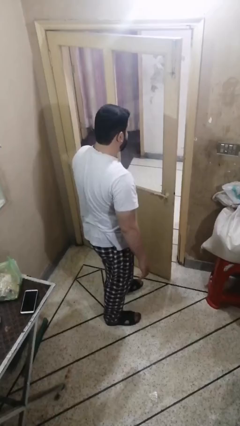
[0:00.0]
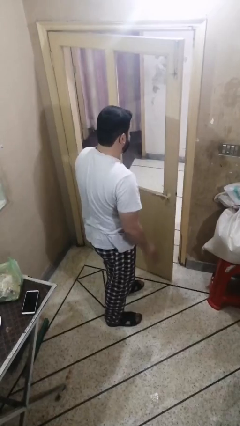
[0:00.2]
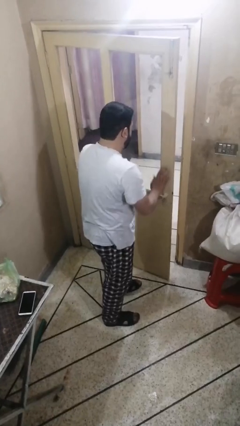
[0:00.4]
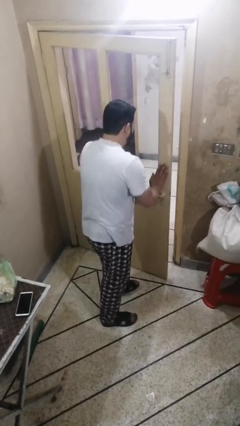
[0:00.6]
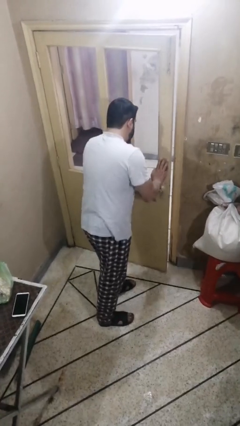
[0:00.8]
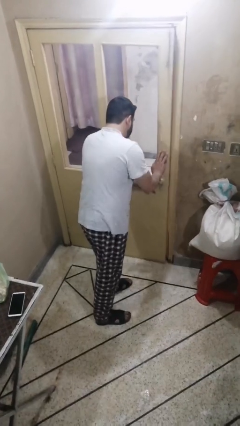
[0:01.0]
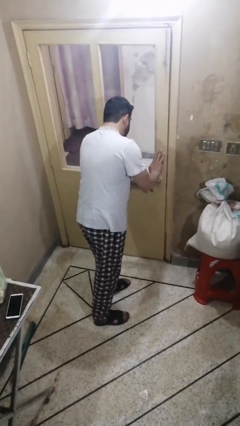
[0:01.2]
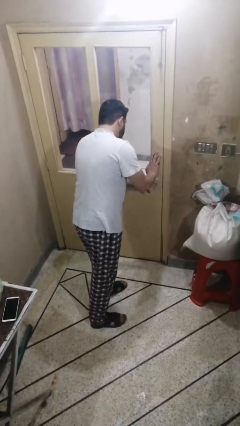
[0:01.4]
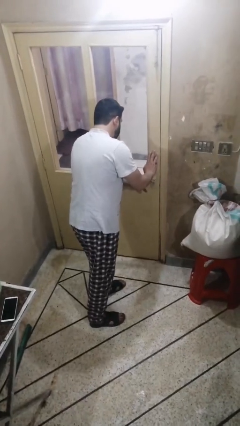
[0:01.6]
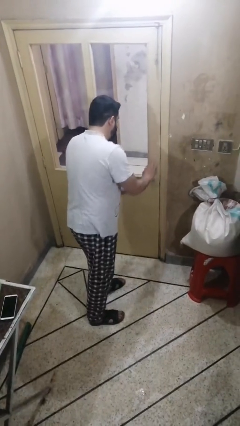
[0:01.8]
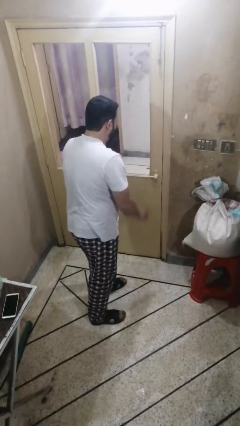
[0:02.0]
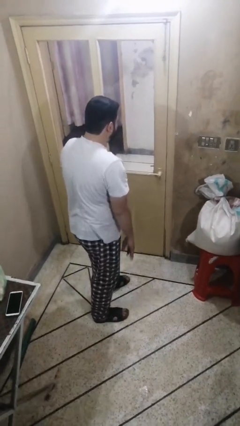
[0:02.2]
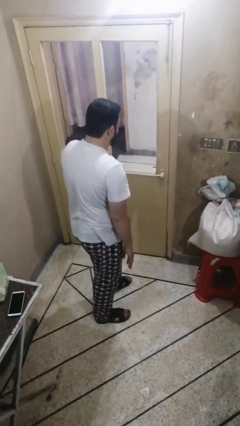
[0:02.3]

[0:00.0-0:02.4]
person closes facility door

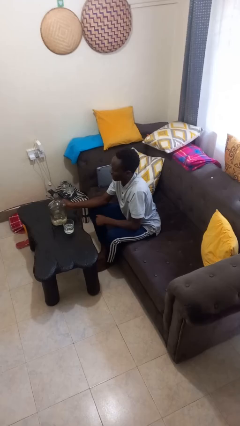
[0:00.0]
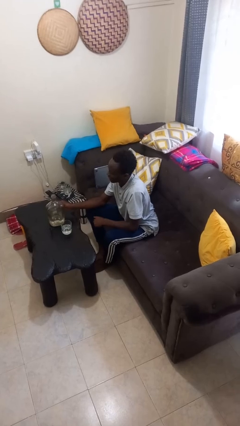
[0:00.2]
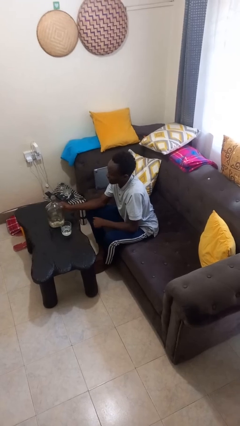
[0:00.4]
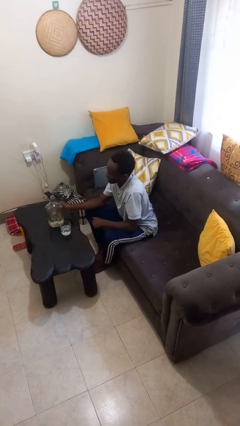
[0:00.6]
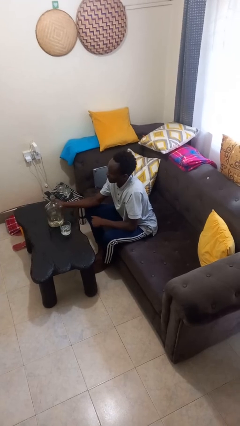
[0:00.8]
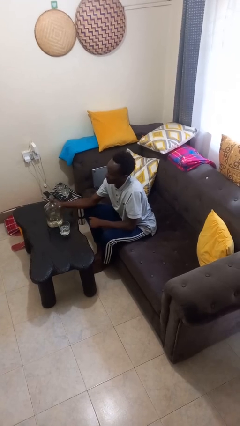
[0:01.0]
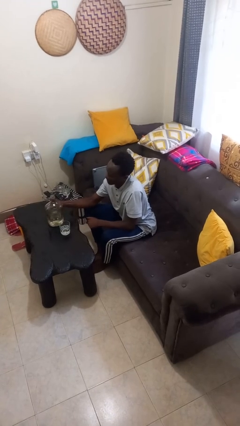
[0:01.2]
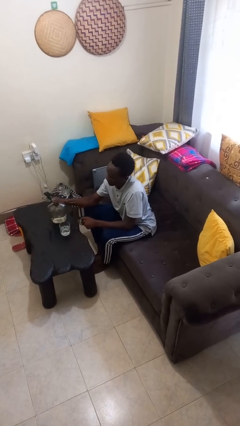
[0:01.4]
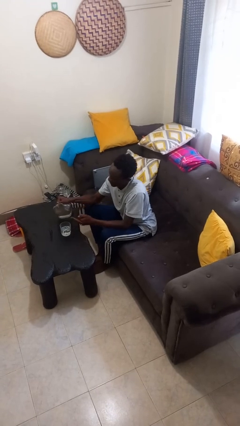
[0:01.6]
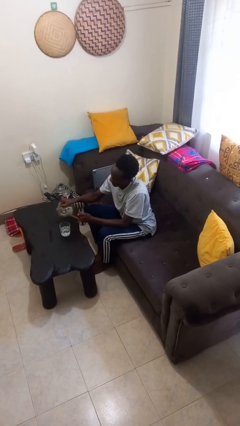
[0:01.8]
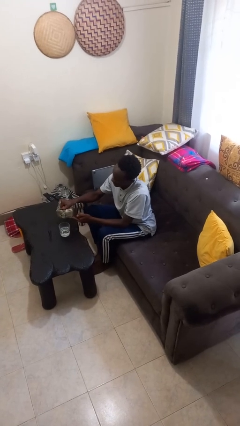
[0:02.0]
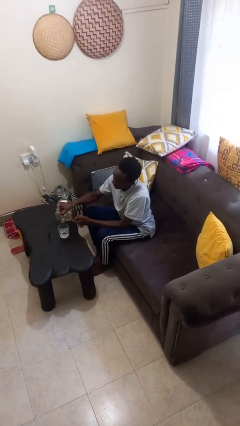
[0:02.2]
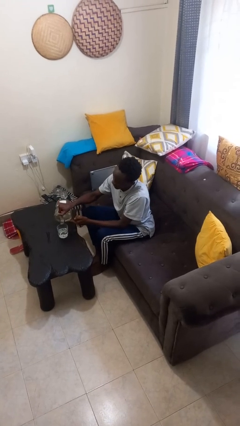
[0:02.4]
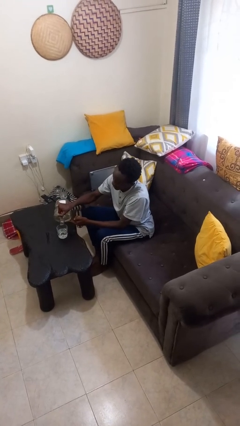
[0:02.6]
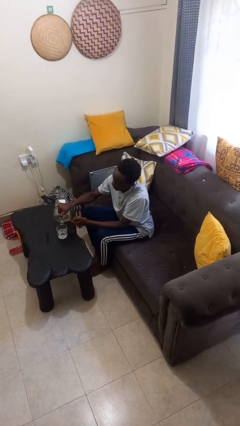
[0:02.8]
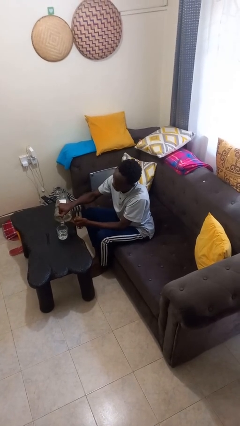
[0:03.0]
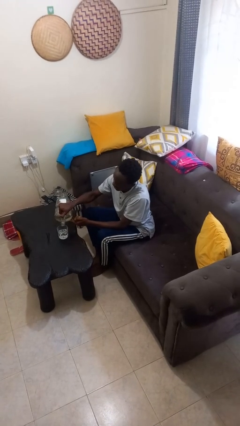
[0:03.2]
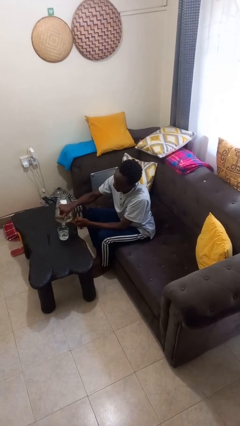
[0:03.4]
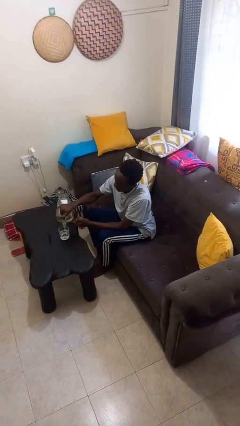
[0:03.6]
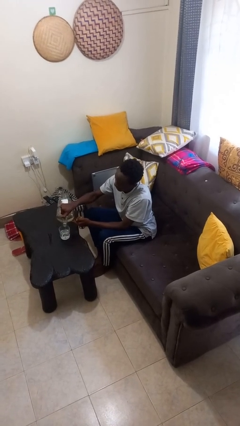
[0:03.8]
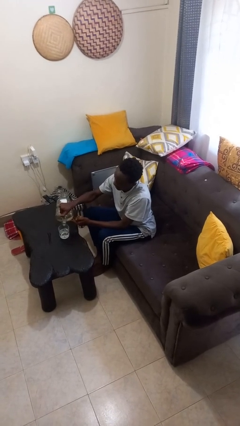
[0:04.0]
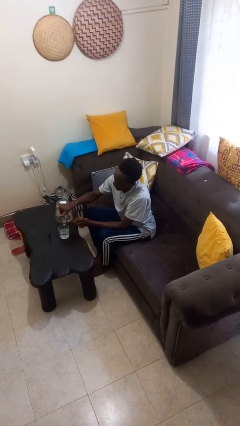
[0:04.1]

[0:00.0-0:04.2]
person pours liquid into cup

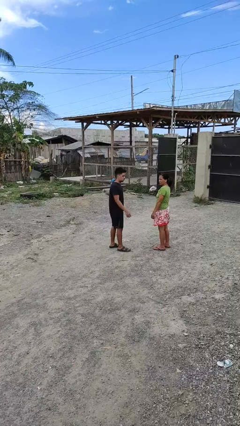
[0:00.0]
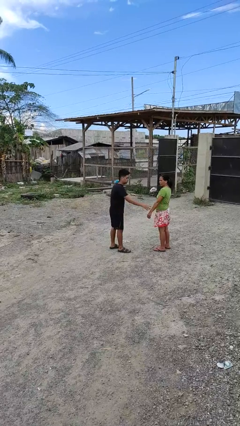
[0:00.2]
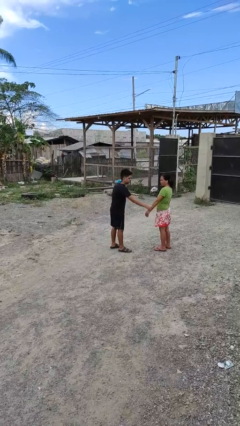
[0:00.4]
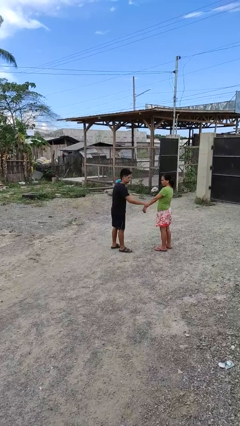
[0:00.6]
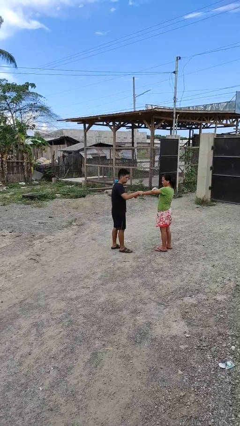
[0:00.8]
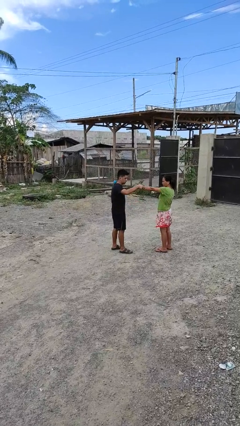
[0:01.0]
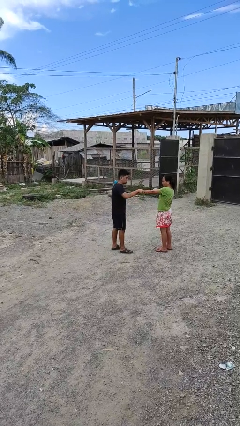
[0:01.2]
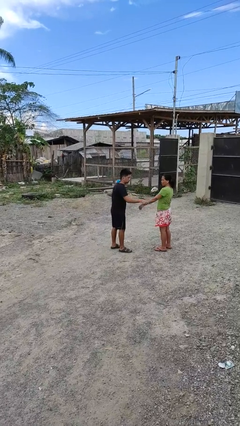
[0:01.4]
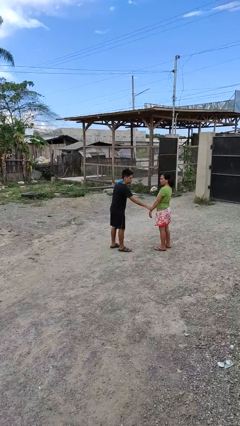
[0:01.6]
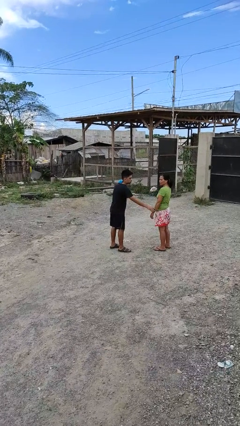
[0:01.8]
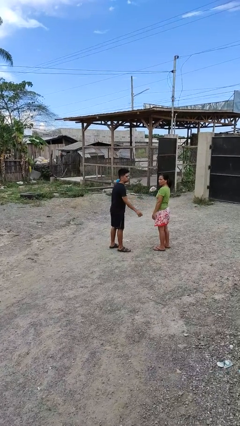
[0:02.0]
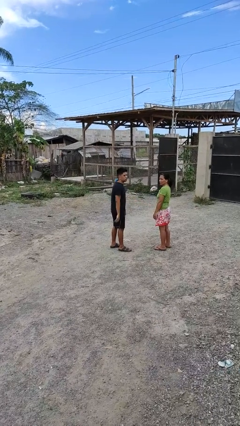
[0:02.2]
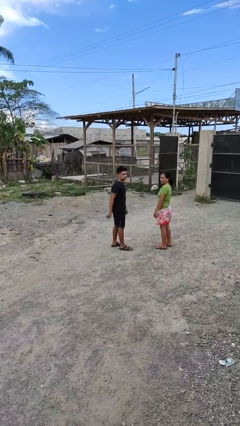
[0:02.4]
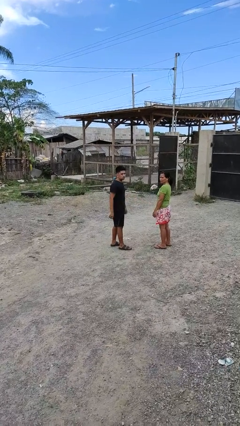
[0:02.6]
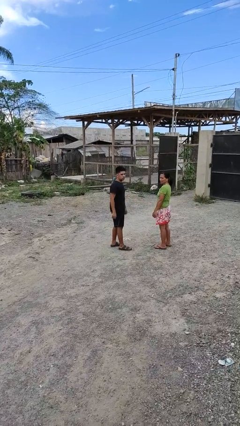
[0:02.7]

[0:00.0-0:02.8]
person grabs person by forearm

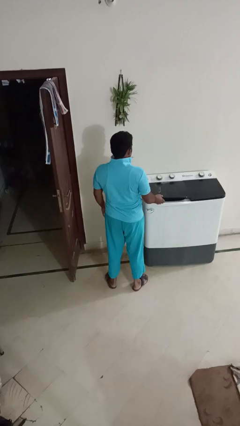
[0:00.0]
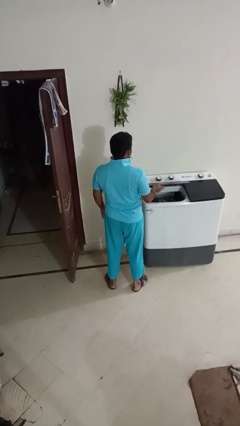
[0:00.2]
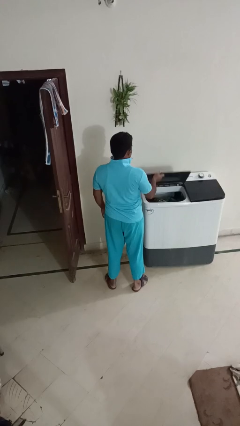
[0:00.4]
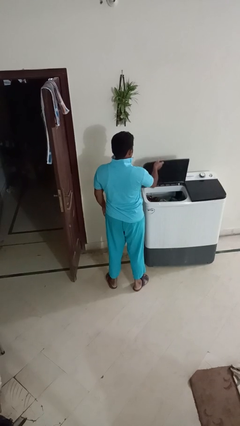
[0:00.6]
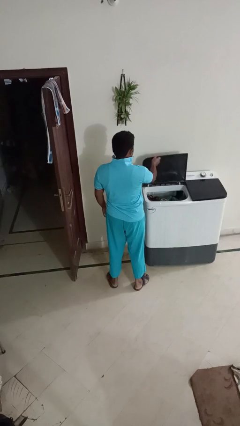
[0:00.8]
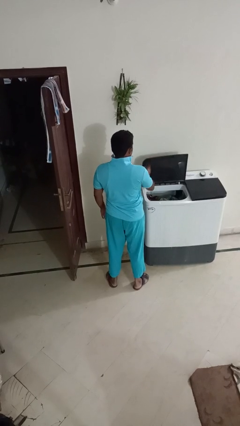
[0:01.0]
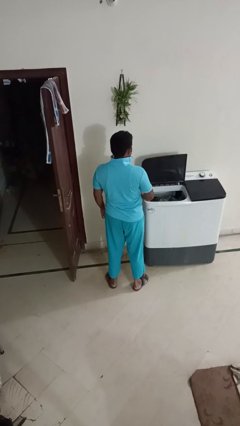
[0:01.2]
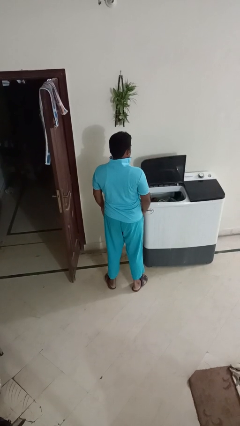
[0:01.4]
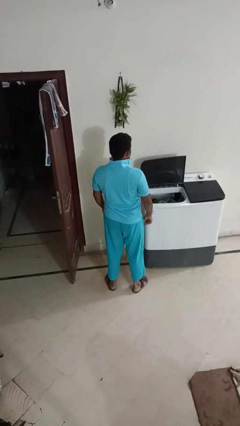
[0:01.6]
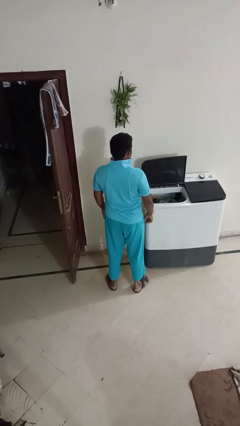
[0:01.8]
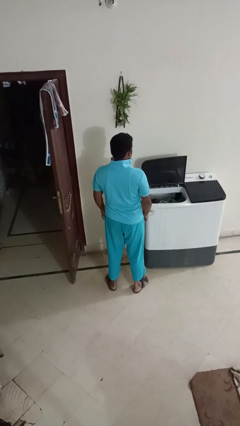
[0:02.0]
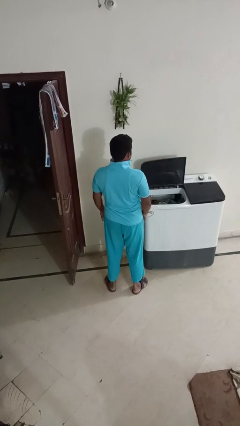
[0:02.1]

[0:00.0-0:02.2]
person opens clothes washer

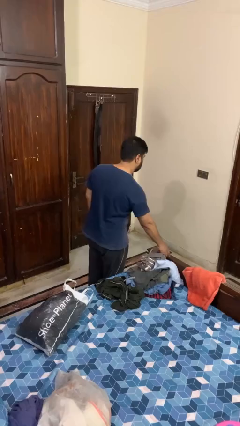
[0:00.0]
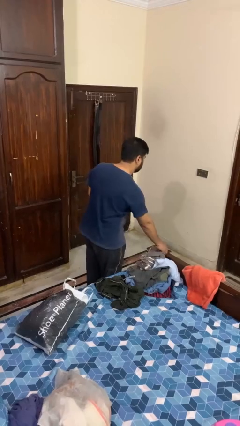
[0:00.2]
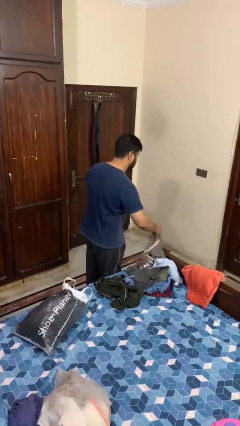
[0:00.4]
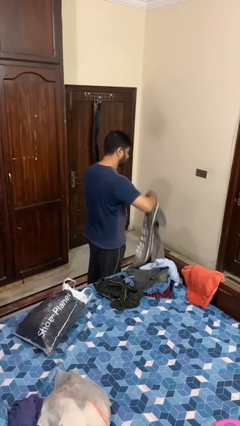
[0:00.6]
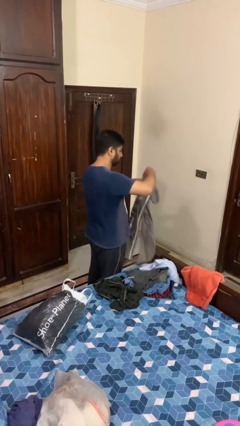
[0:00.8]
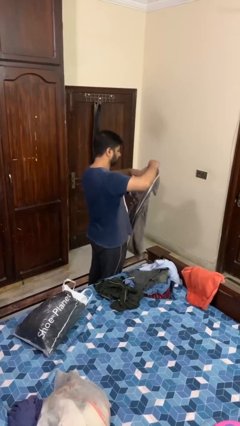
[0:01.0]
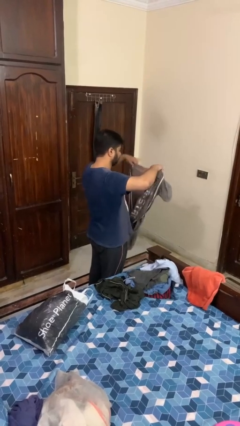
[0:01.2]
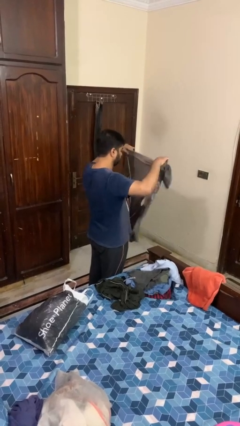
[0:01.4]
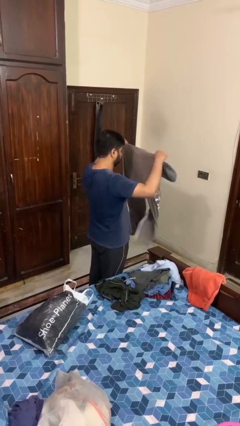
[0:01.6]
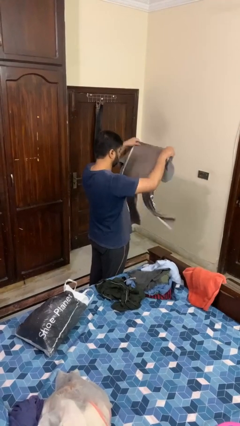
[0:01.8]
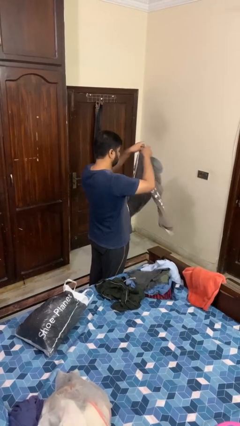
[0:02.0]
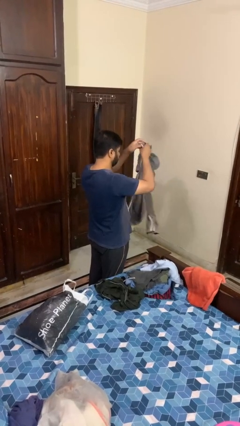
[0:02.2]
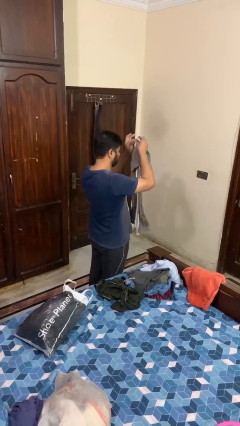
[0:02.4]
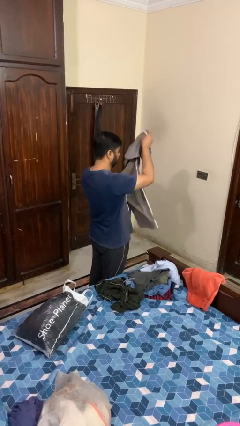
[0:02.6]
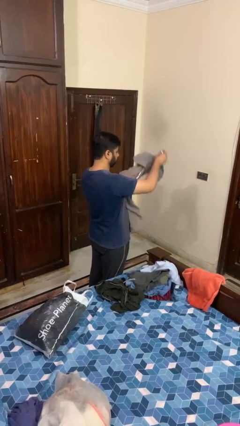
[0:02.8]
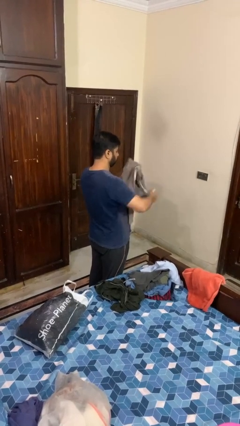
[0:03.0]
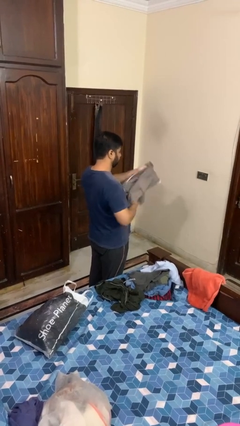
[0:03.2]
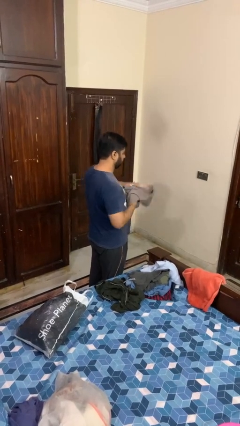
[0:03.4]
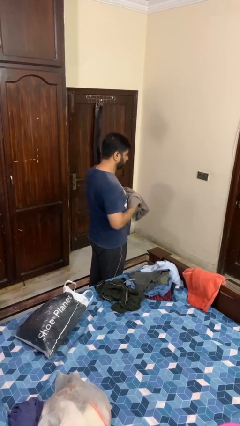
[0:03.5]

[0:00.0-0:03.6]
person folds pants

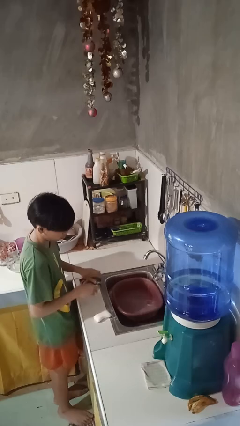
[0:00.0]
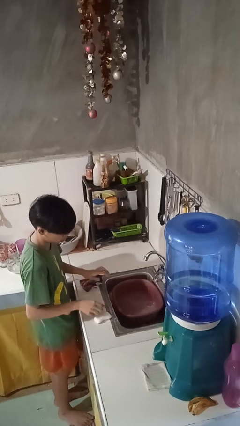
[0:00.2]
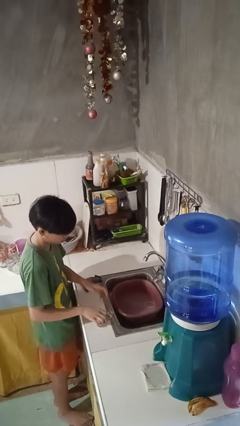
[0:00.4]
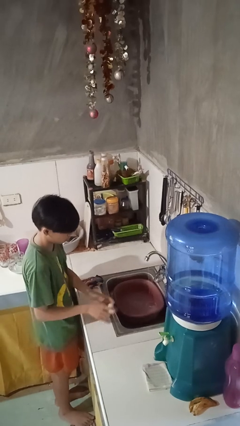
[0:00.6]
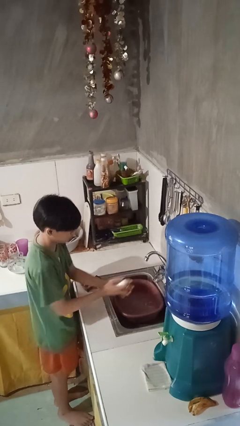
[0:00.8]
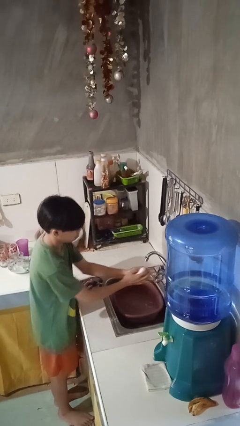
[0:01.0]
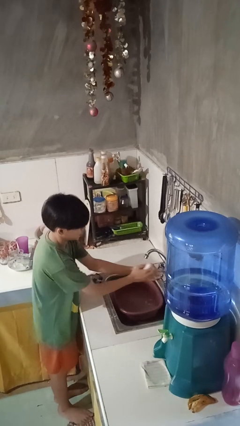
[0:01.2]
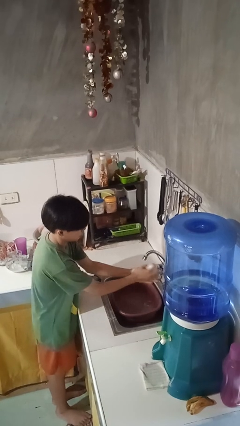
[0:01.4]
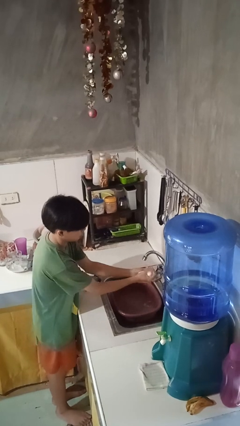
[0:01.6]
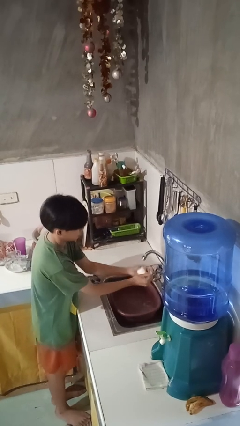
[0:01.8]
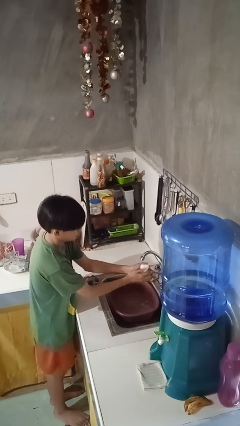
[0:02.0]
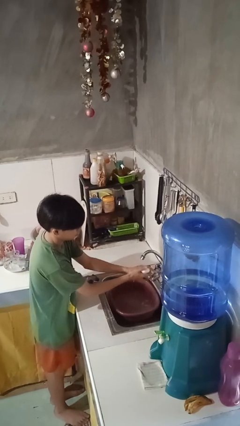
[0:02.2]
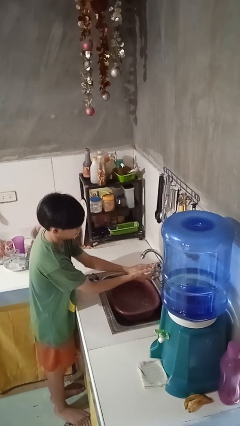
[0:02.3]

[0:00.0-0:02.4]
person washes hands
